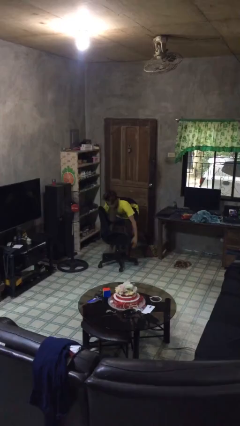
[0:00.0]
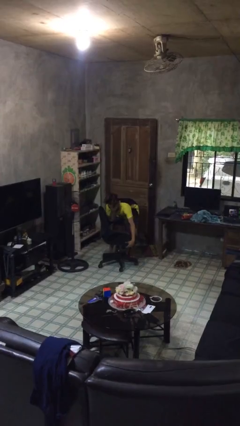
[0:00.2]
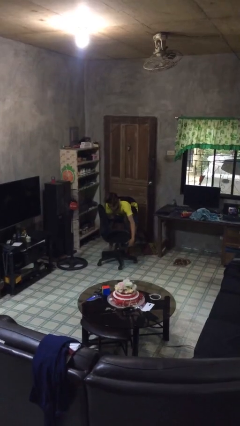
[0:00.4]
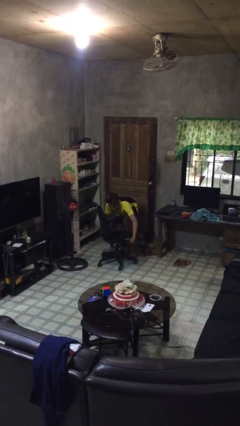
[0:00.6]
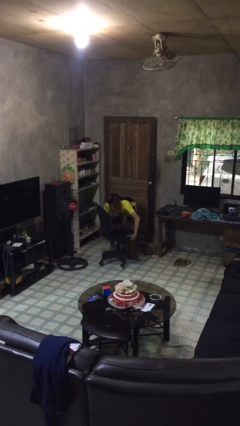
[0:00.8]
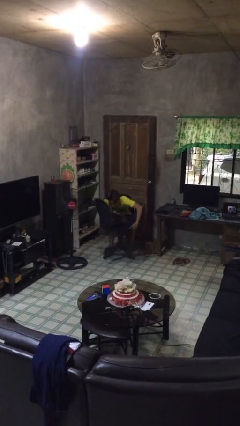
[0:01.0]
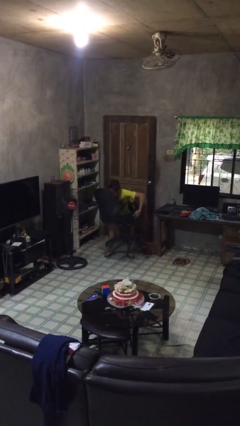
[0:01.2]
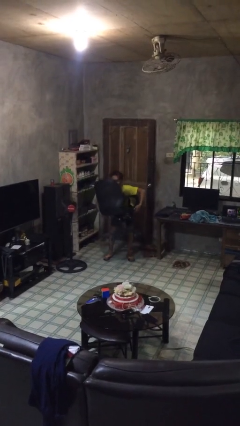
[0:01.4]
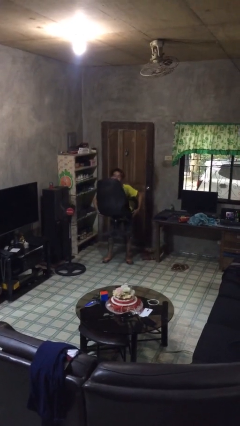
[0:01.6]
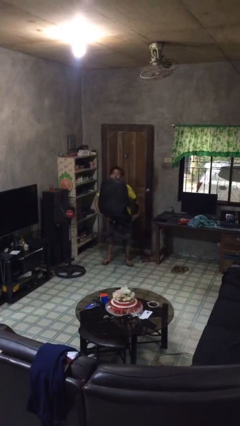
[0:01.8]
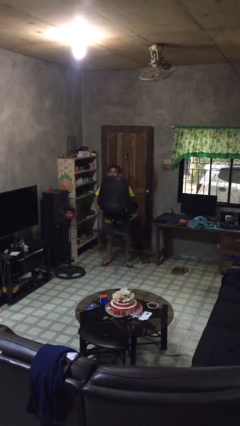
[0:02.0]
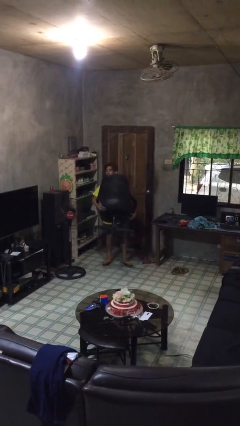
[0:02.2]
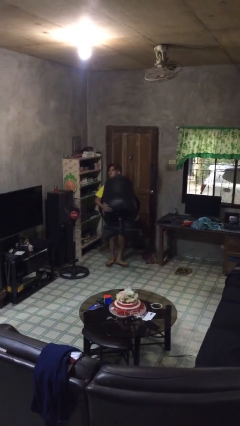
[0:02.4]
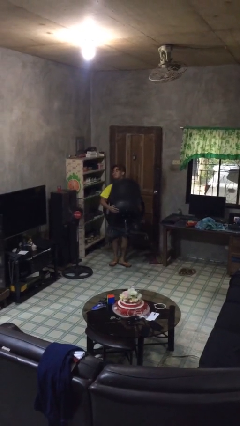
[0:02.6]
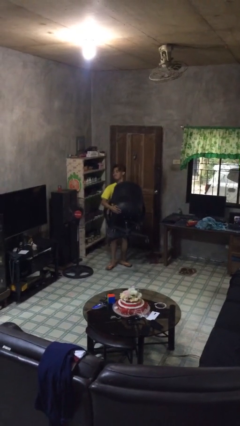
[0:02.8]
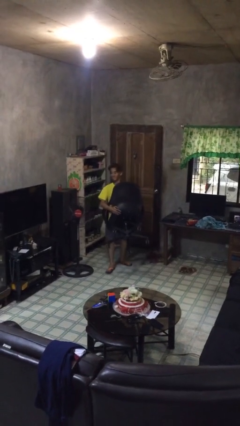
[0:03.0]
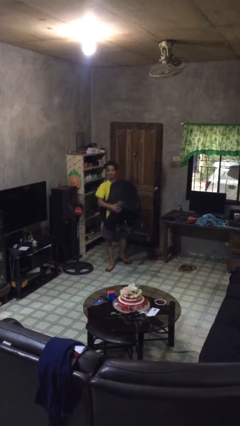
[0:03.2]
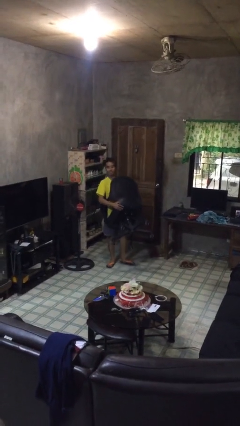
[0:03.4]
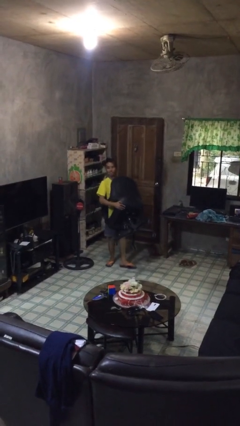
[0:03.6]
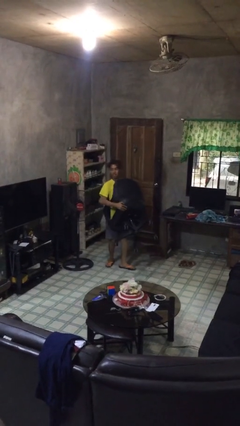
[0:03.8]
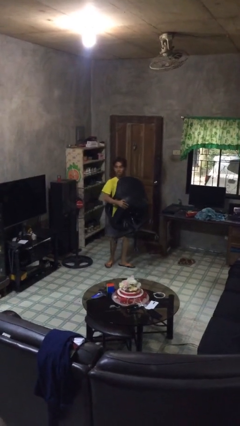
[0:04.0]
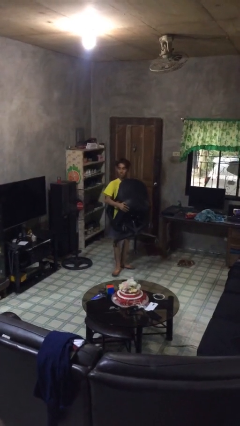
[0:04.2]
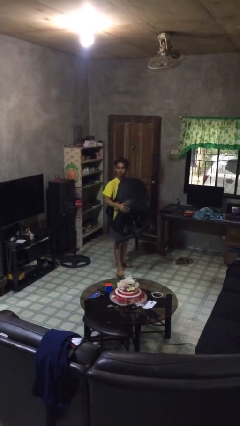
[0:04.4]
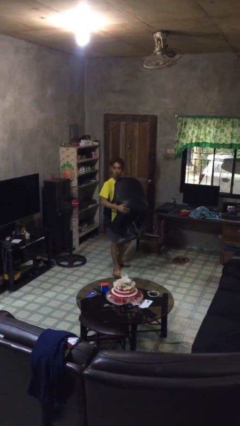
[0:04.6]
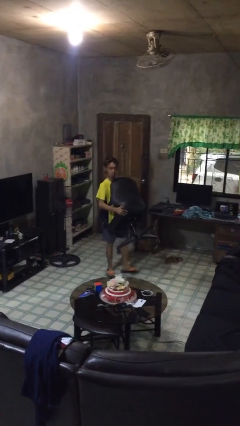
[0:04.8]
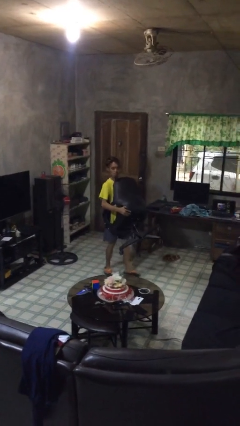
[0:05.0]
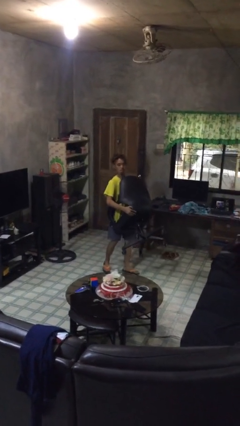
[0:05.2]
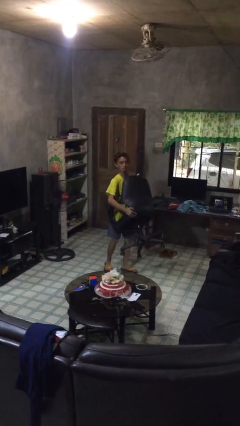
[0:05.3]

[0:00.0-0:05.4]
person carries heavy object

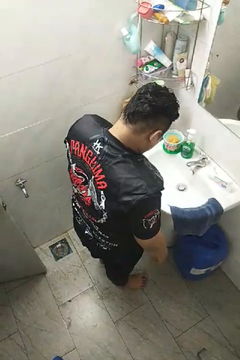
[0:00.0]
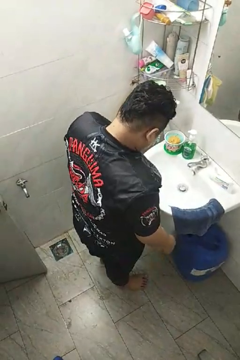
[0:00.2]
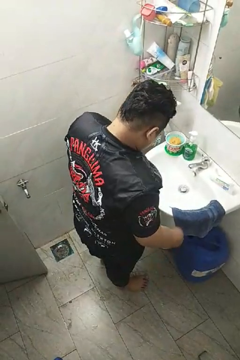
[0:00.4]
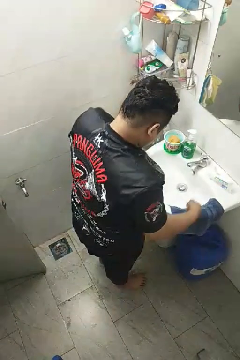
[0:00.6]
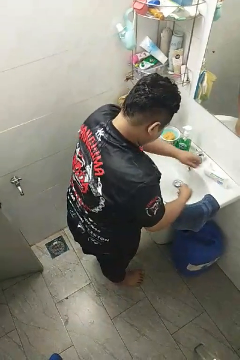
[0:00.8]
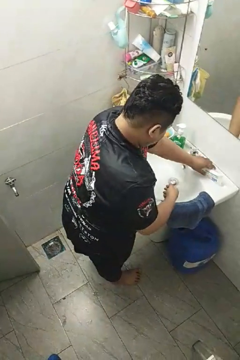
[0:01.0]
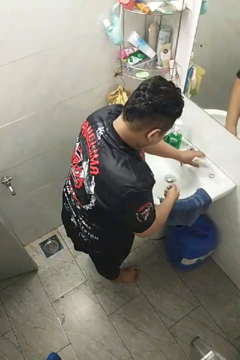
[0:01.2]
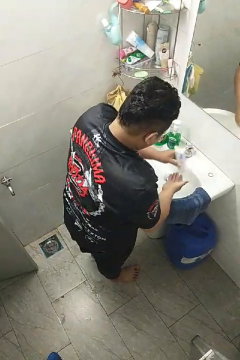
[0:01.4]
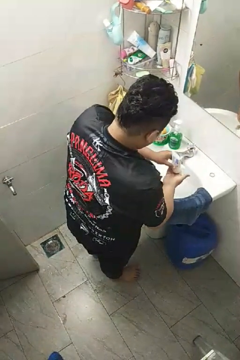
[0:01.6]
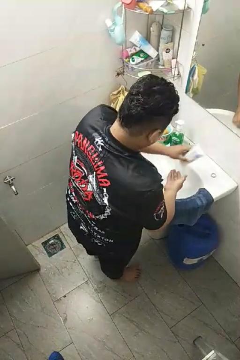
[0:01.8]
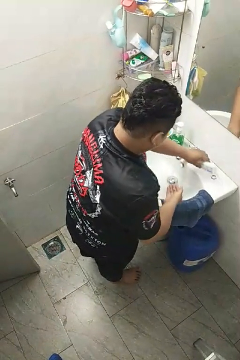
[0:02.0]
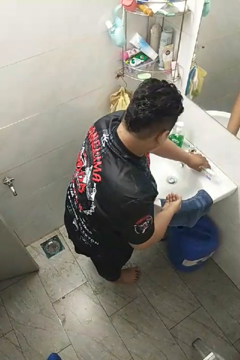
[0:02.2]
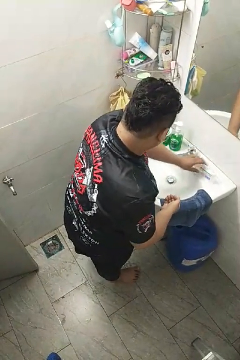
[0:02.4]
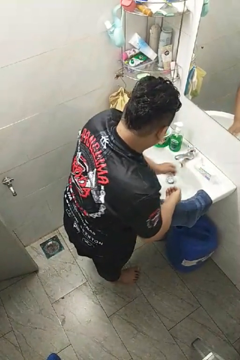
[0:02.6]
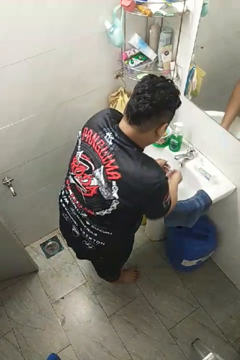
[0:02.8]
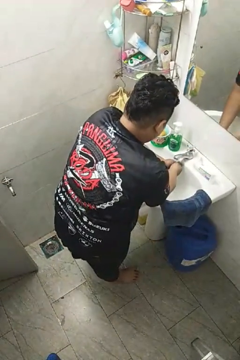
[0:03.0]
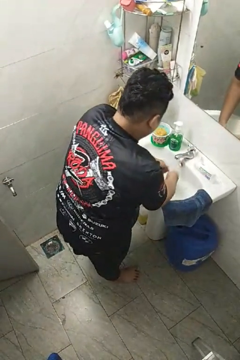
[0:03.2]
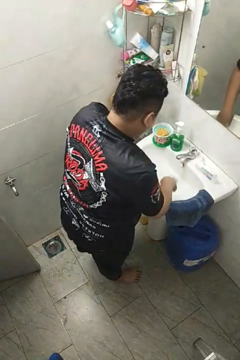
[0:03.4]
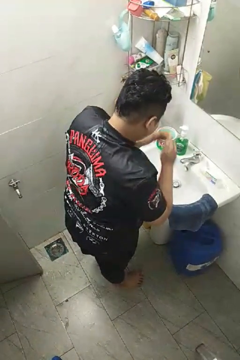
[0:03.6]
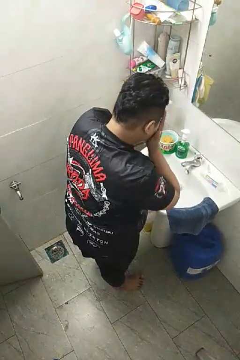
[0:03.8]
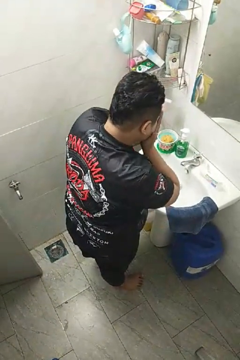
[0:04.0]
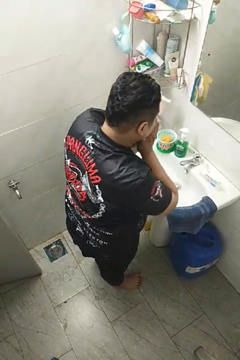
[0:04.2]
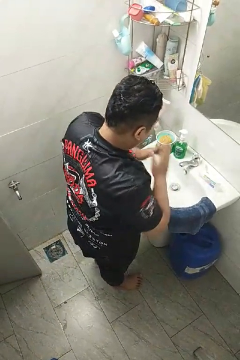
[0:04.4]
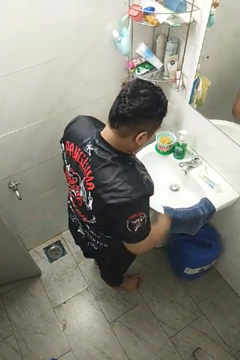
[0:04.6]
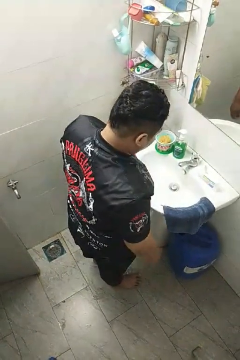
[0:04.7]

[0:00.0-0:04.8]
person washes face

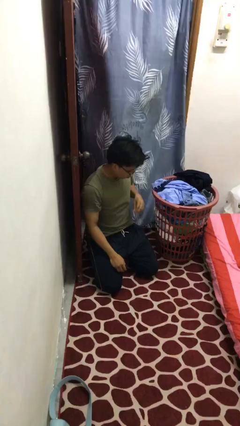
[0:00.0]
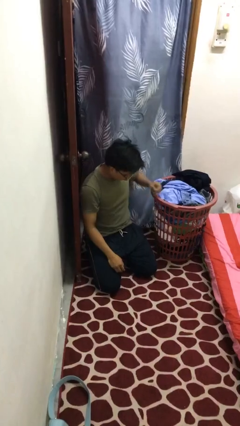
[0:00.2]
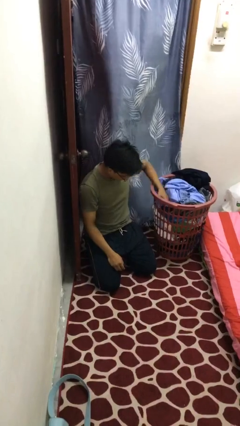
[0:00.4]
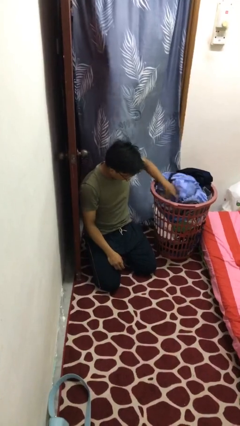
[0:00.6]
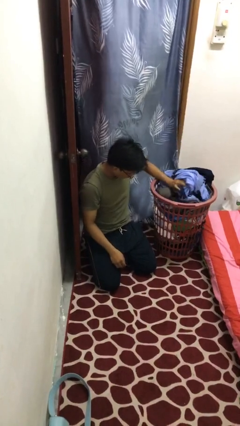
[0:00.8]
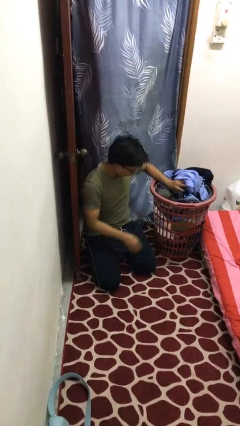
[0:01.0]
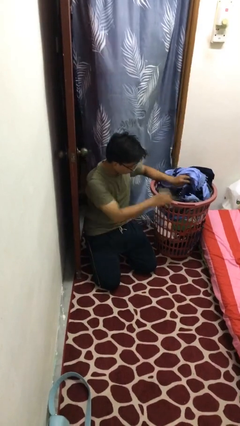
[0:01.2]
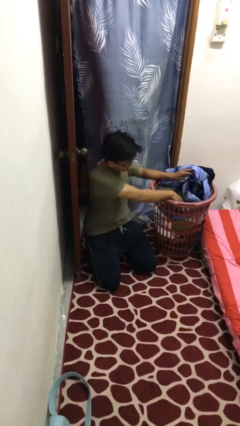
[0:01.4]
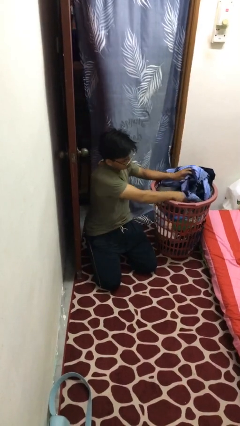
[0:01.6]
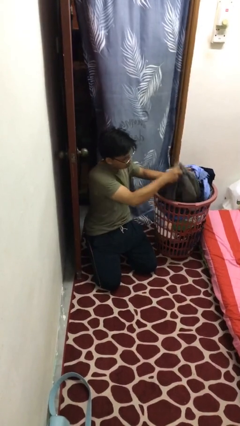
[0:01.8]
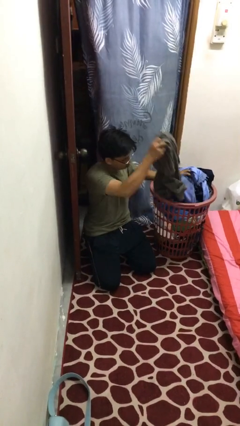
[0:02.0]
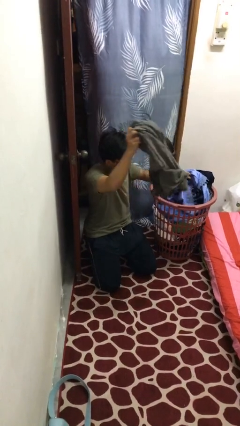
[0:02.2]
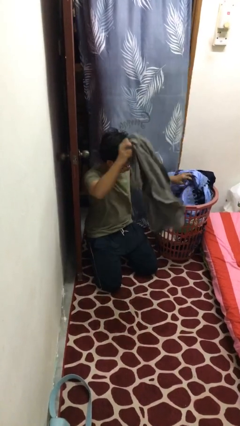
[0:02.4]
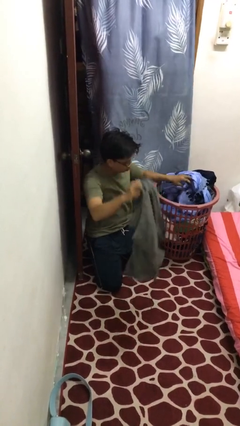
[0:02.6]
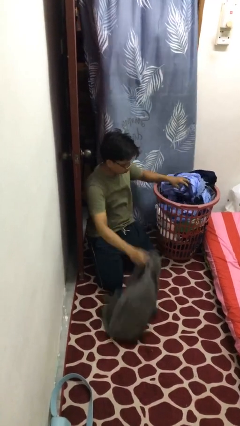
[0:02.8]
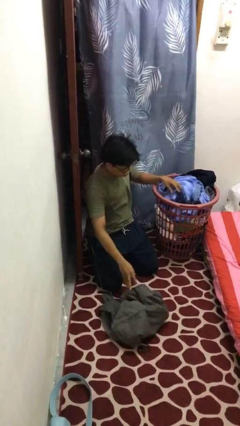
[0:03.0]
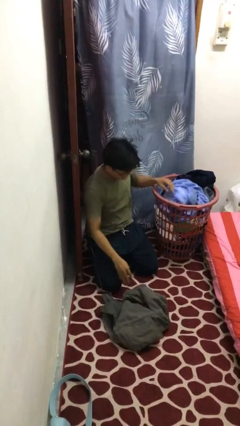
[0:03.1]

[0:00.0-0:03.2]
person takes object from basket

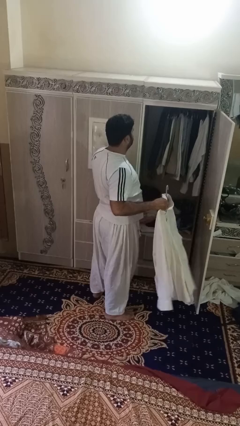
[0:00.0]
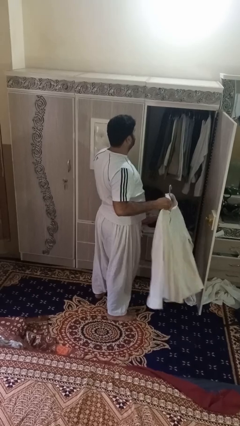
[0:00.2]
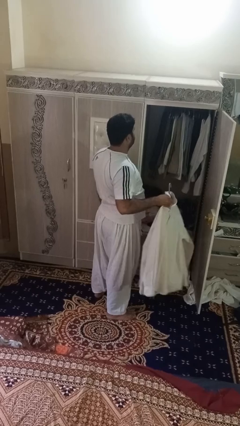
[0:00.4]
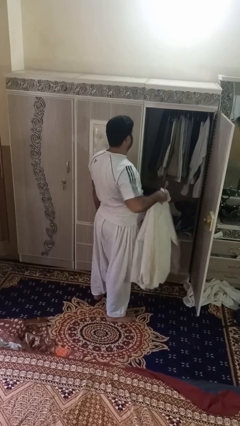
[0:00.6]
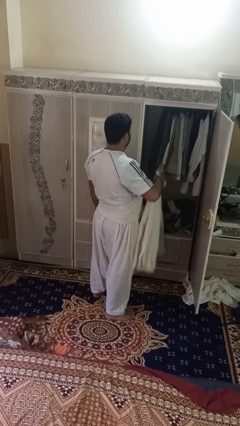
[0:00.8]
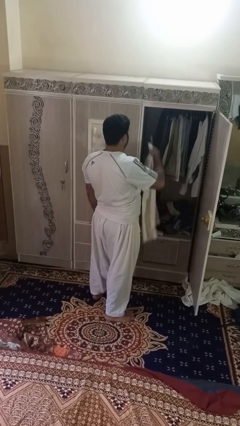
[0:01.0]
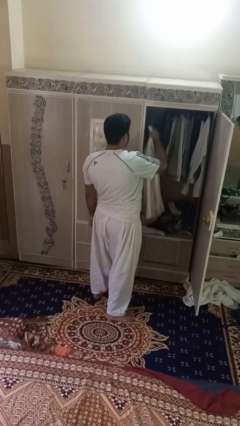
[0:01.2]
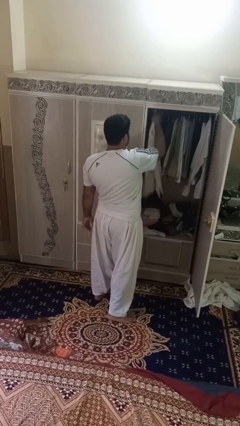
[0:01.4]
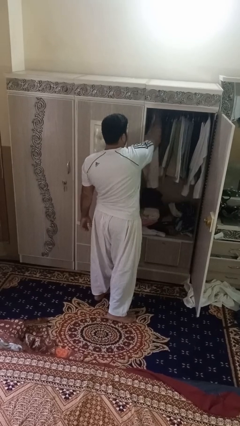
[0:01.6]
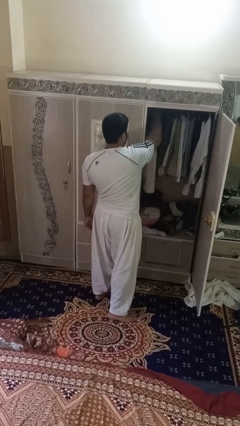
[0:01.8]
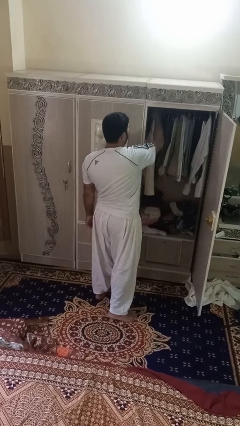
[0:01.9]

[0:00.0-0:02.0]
person puts clothes into closet

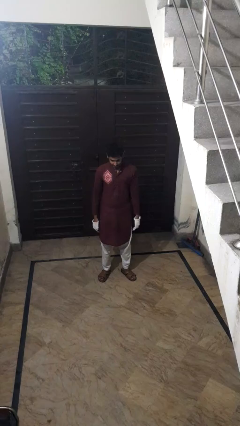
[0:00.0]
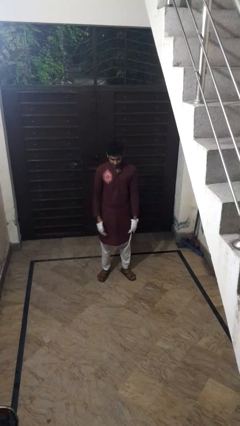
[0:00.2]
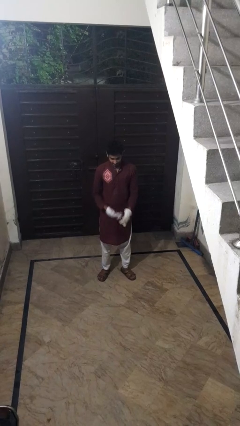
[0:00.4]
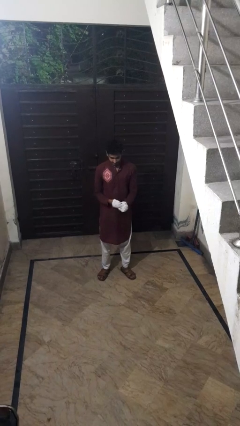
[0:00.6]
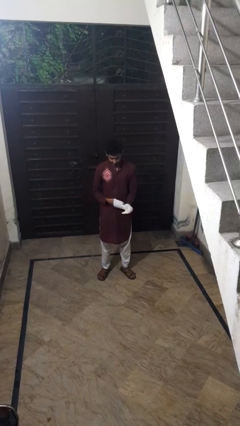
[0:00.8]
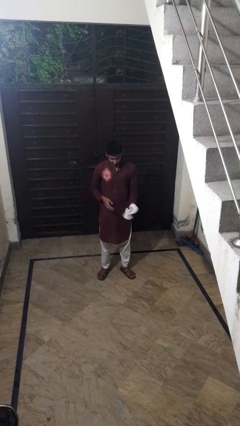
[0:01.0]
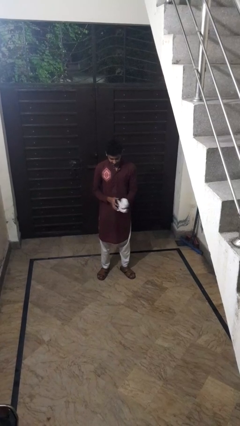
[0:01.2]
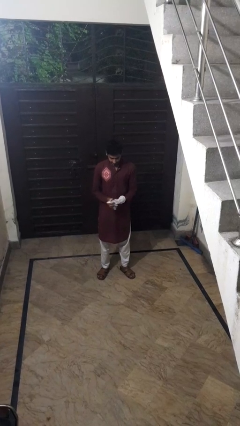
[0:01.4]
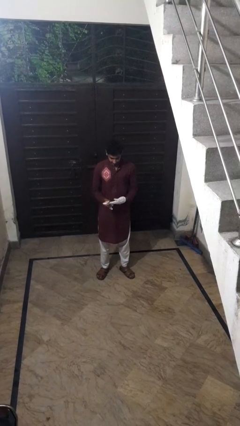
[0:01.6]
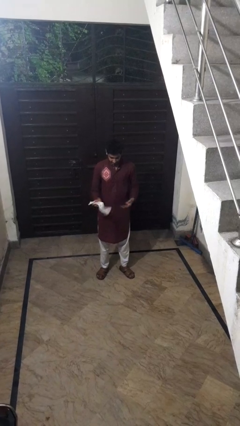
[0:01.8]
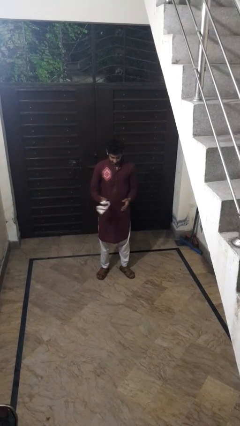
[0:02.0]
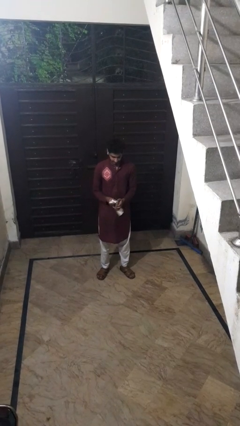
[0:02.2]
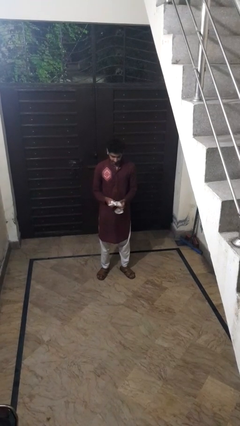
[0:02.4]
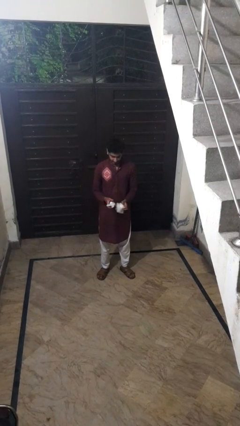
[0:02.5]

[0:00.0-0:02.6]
person takes off gloves
